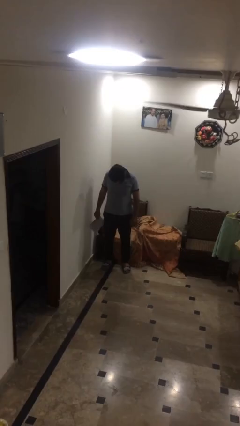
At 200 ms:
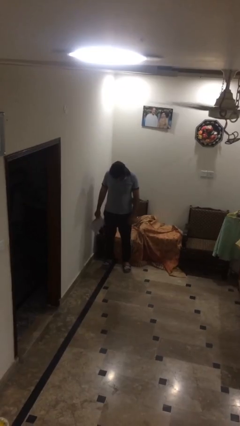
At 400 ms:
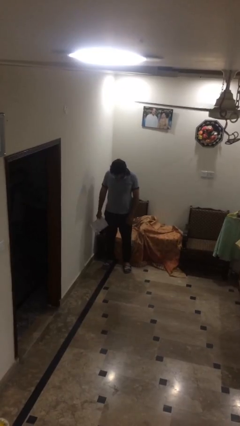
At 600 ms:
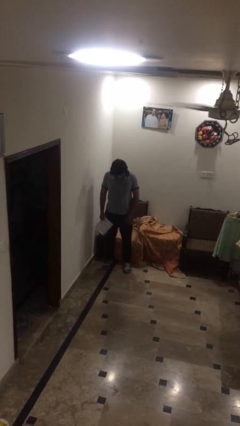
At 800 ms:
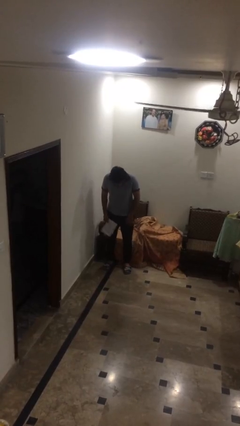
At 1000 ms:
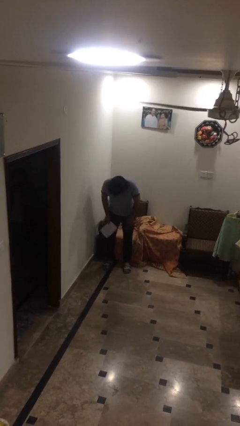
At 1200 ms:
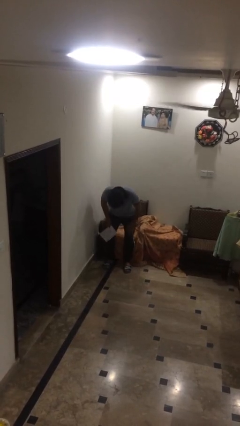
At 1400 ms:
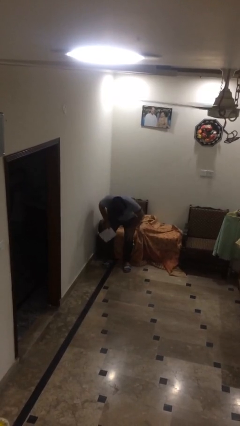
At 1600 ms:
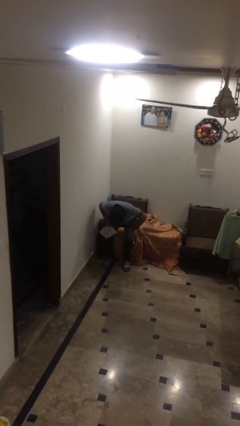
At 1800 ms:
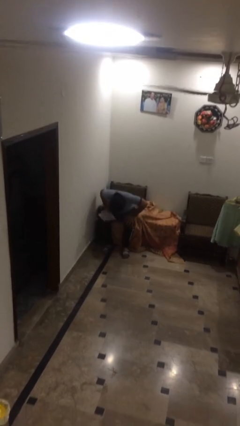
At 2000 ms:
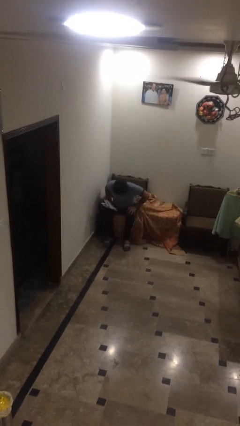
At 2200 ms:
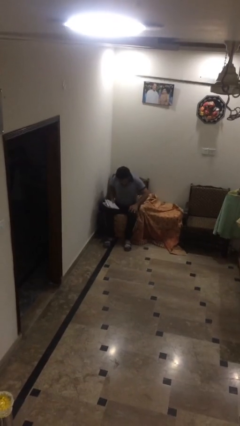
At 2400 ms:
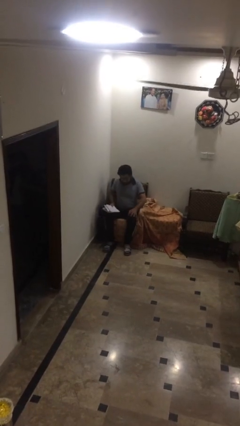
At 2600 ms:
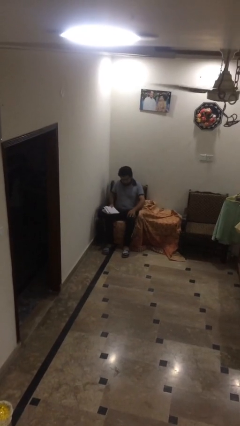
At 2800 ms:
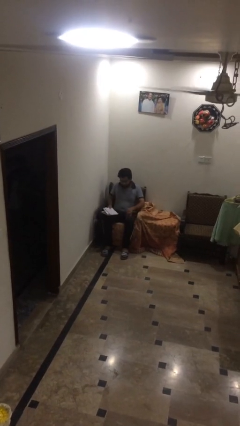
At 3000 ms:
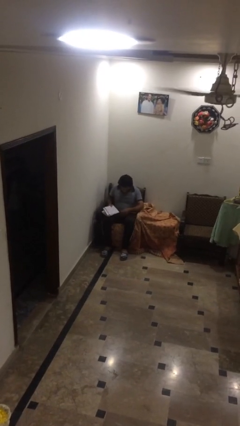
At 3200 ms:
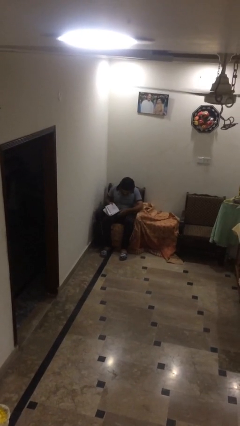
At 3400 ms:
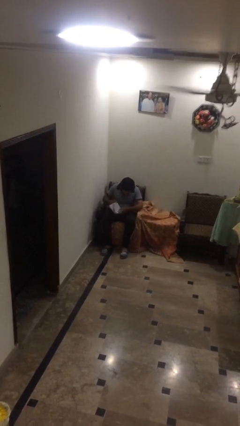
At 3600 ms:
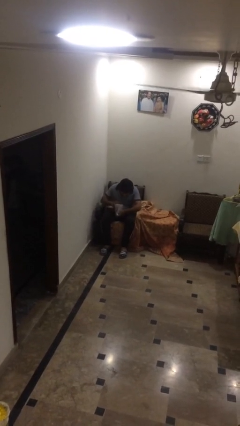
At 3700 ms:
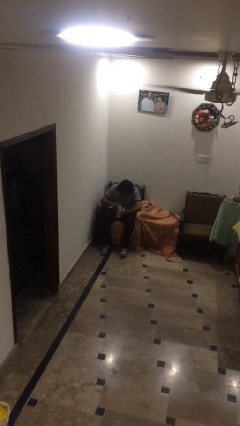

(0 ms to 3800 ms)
person sits down

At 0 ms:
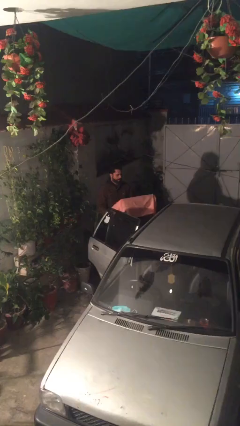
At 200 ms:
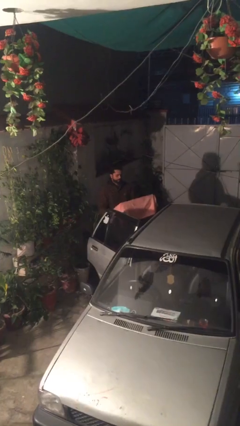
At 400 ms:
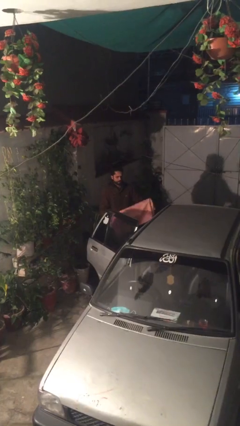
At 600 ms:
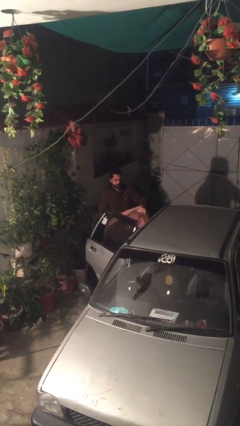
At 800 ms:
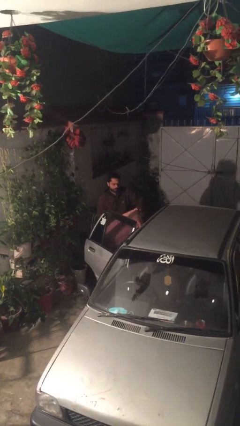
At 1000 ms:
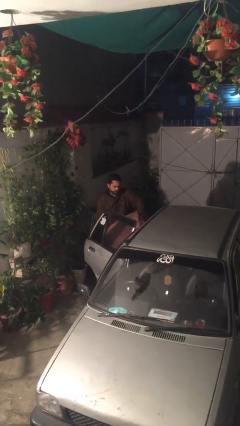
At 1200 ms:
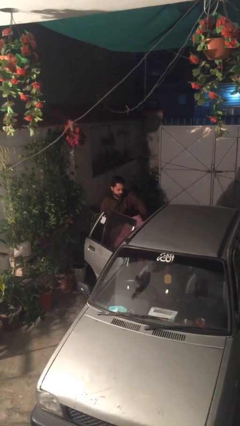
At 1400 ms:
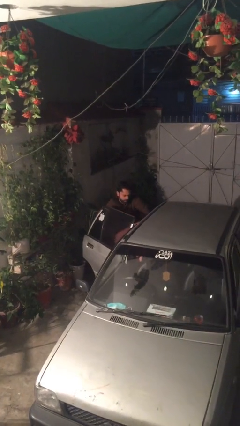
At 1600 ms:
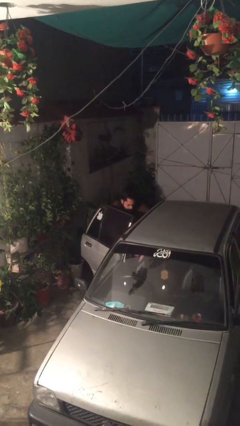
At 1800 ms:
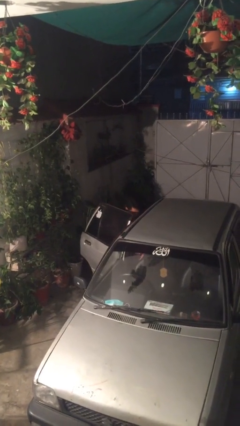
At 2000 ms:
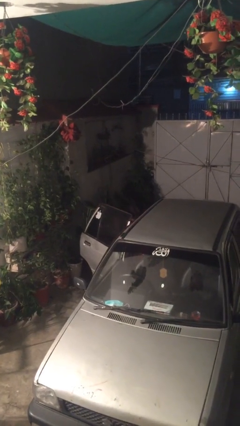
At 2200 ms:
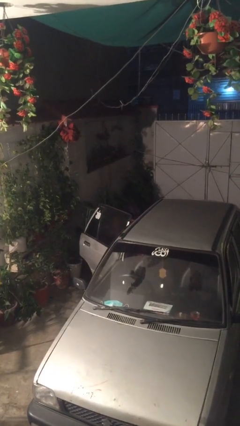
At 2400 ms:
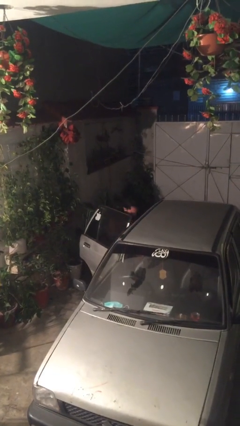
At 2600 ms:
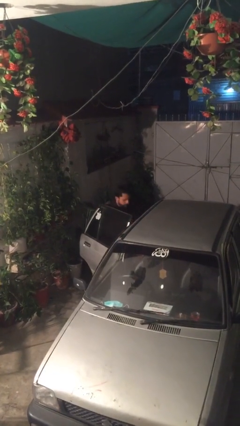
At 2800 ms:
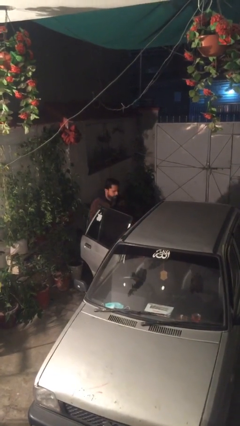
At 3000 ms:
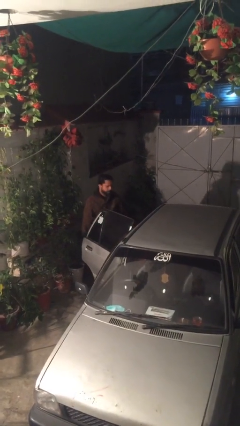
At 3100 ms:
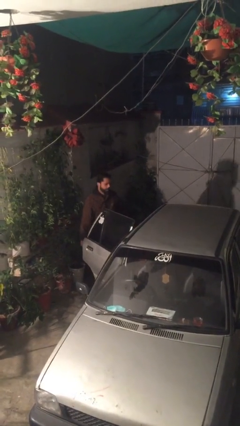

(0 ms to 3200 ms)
person loads car

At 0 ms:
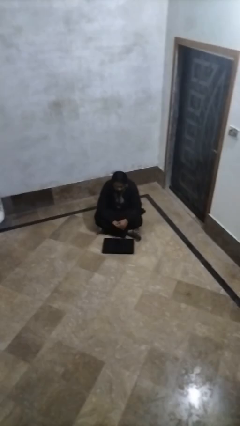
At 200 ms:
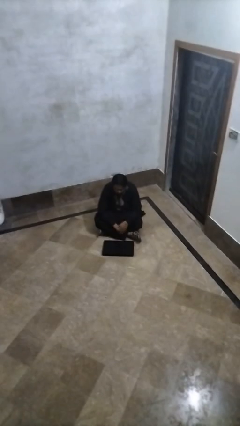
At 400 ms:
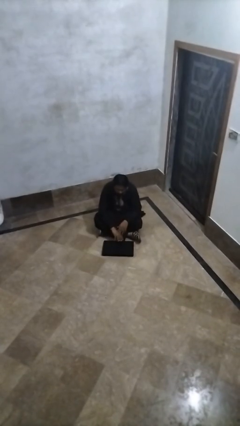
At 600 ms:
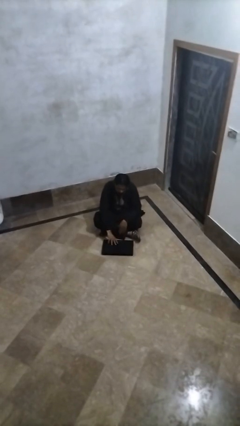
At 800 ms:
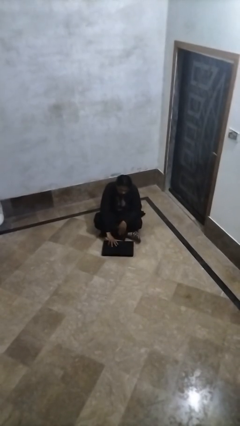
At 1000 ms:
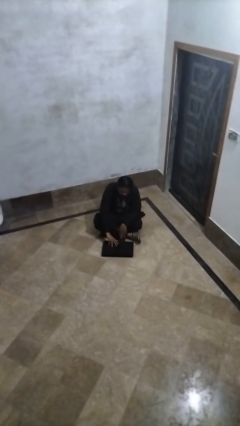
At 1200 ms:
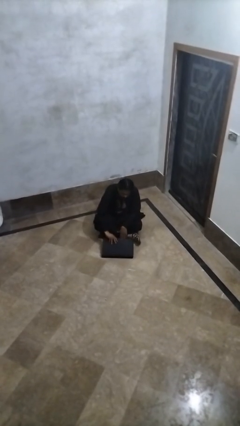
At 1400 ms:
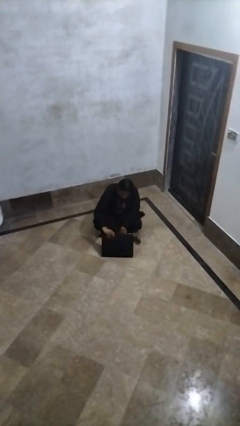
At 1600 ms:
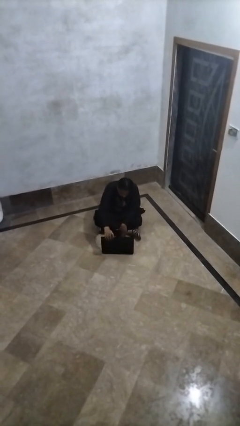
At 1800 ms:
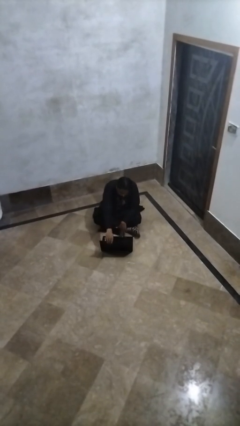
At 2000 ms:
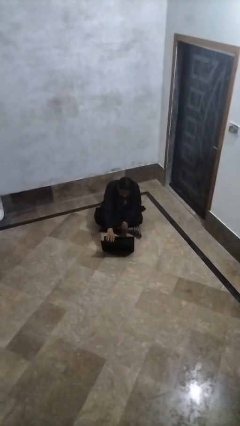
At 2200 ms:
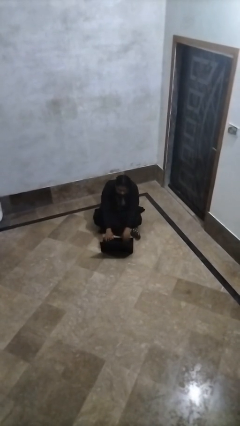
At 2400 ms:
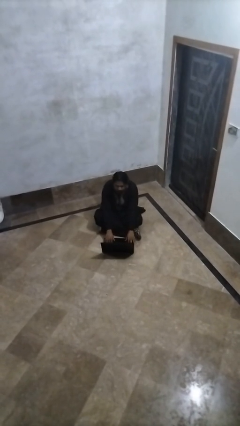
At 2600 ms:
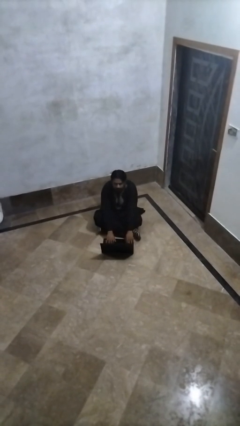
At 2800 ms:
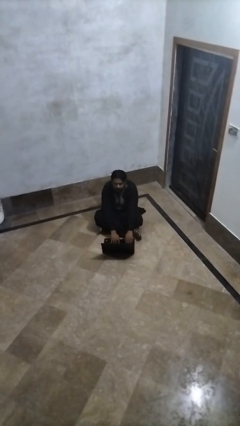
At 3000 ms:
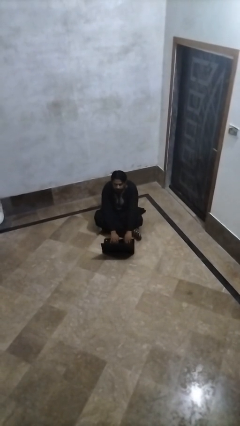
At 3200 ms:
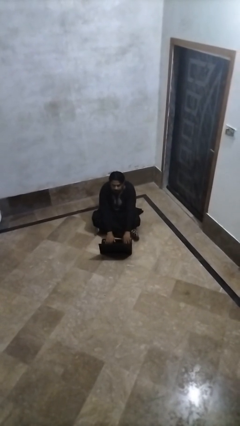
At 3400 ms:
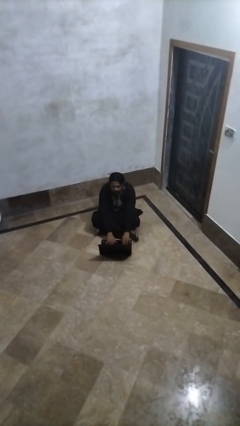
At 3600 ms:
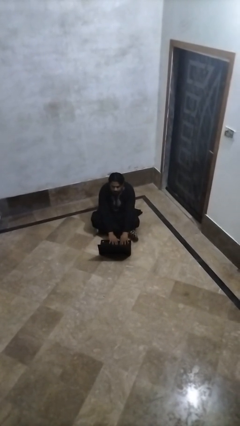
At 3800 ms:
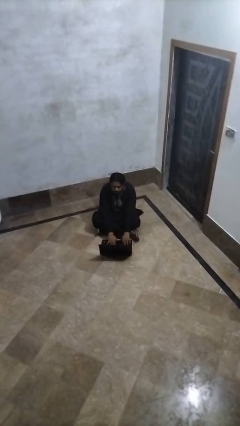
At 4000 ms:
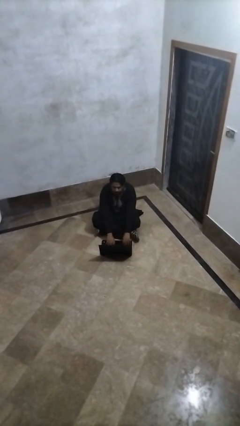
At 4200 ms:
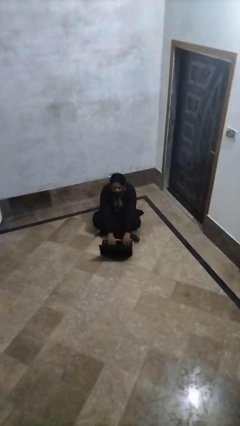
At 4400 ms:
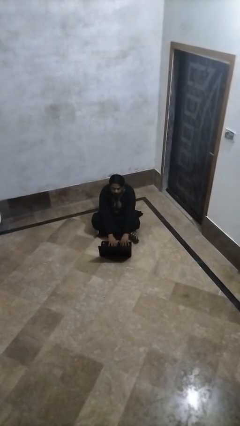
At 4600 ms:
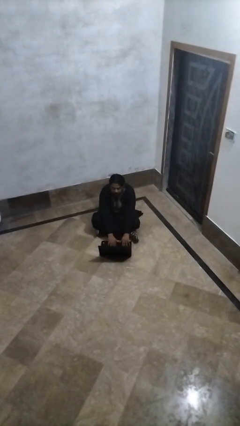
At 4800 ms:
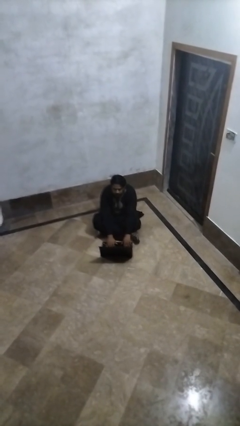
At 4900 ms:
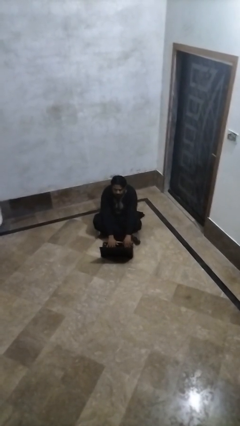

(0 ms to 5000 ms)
person opens laptop

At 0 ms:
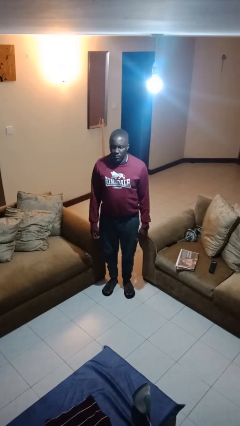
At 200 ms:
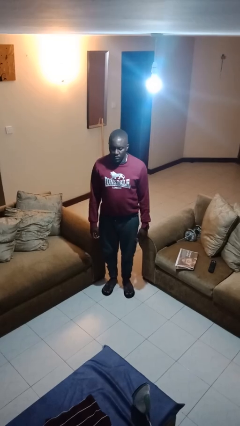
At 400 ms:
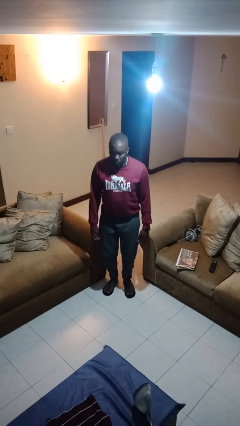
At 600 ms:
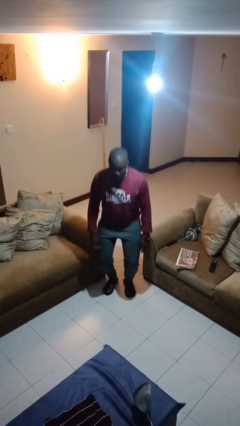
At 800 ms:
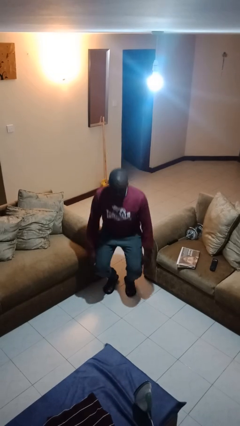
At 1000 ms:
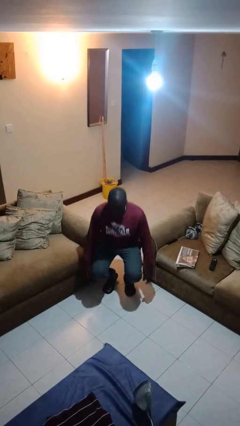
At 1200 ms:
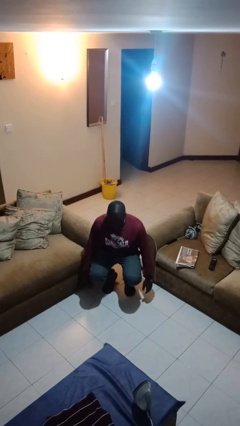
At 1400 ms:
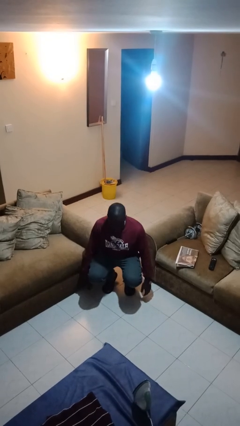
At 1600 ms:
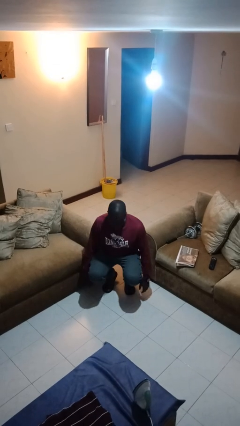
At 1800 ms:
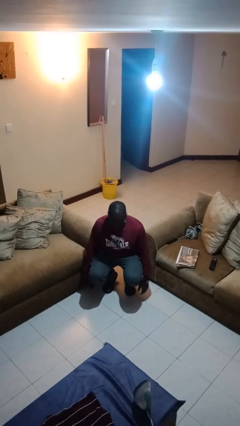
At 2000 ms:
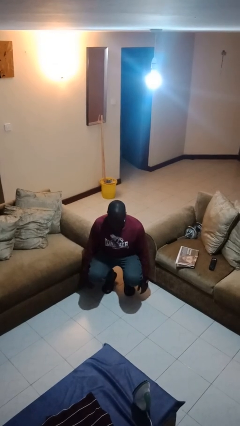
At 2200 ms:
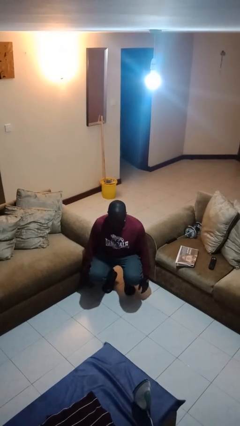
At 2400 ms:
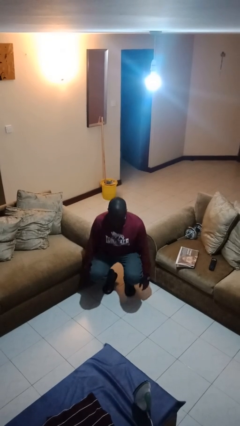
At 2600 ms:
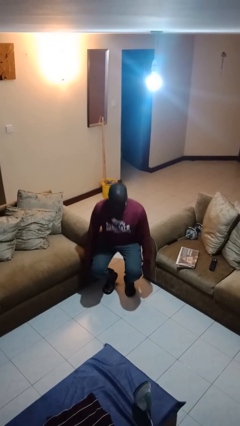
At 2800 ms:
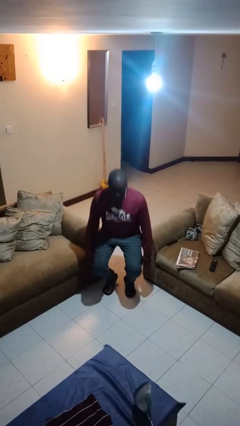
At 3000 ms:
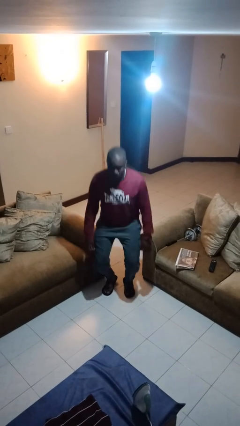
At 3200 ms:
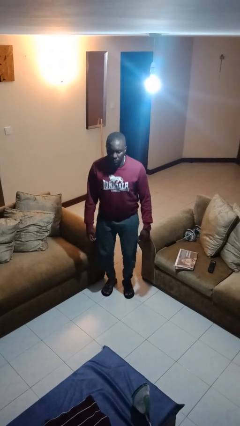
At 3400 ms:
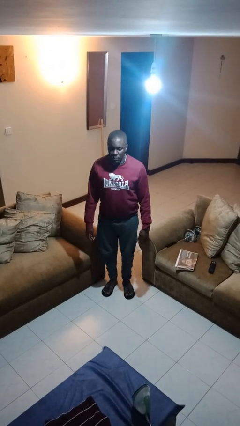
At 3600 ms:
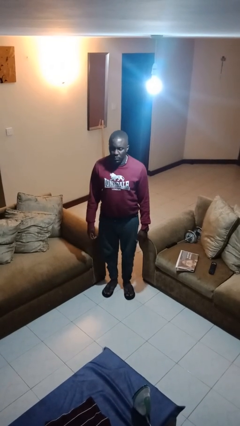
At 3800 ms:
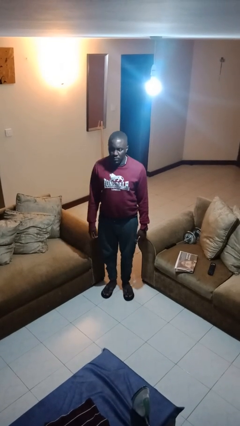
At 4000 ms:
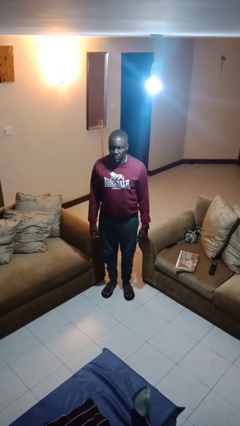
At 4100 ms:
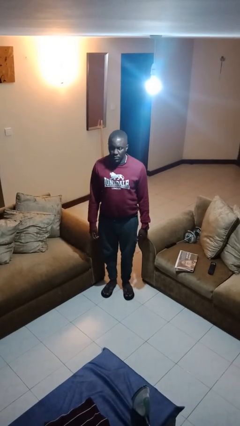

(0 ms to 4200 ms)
person squats

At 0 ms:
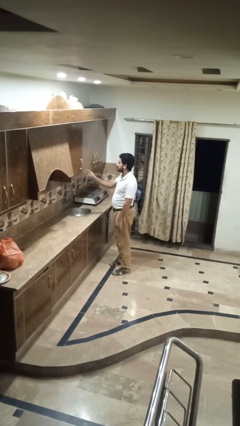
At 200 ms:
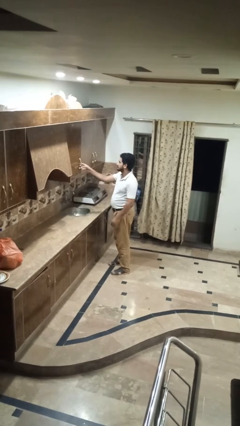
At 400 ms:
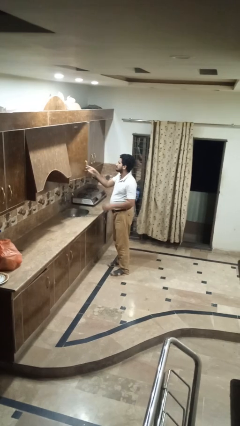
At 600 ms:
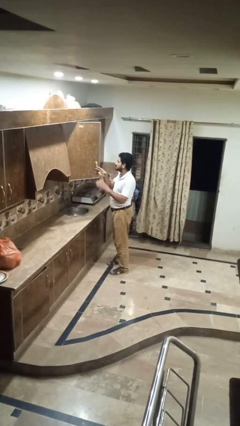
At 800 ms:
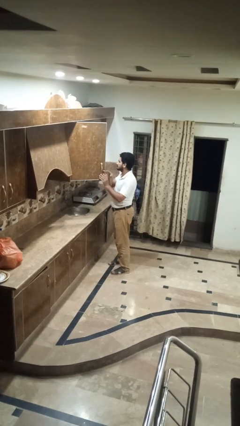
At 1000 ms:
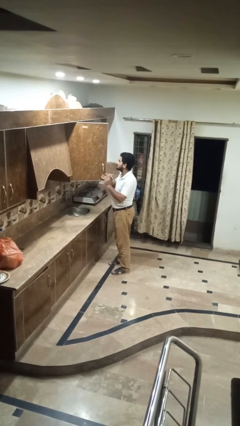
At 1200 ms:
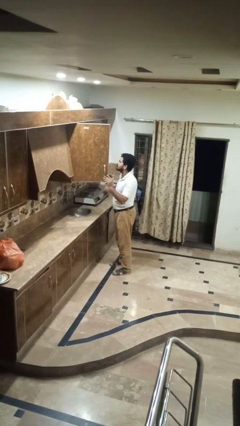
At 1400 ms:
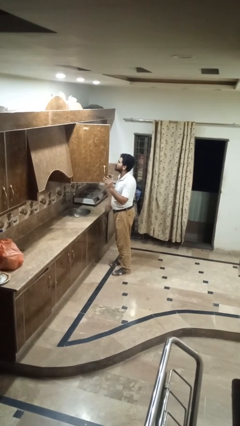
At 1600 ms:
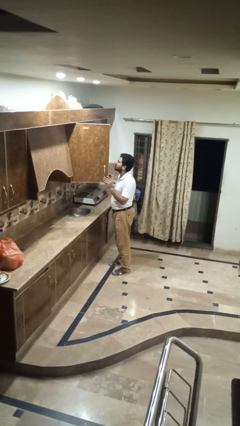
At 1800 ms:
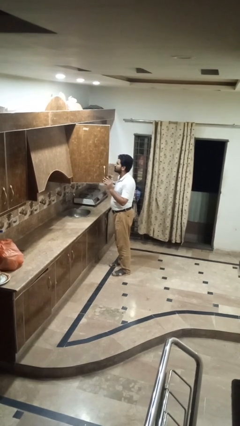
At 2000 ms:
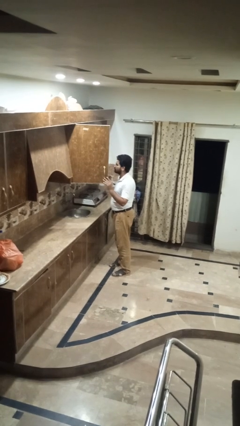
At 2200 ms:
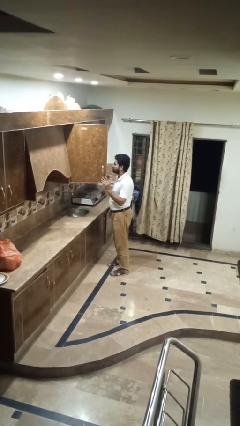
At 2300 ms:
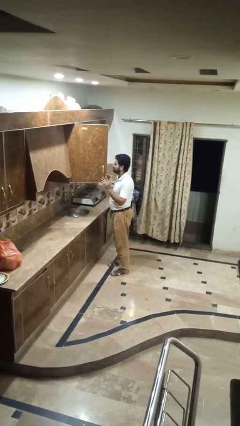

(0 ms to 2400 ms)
person opens kitchen drawer
